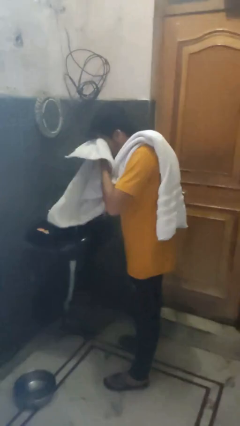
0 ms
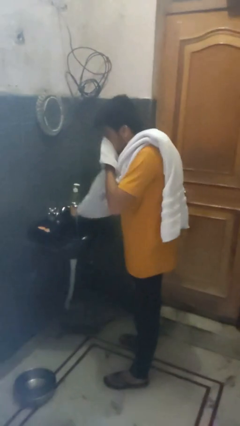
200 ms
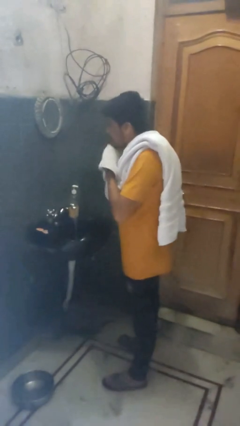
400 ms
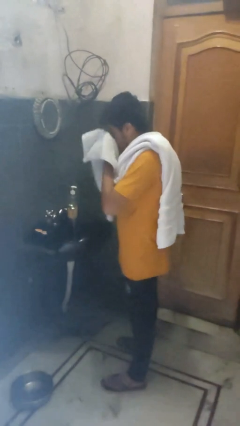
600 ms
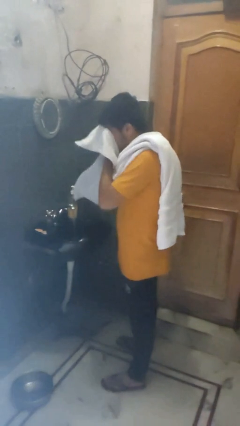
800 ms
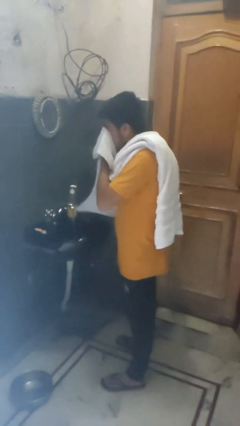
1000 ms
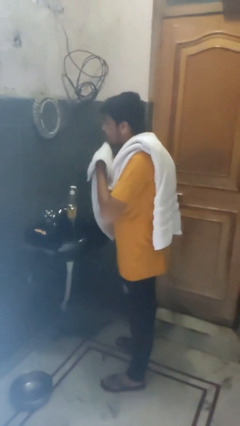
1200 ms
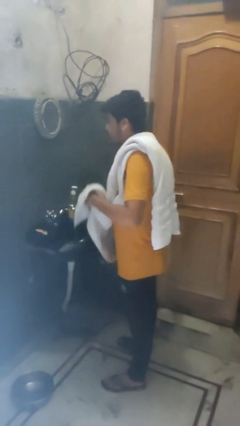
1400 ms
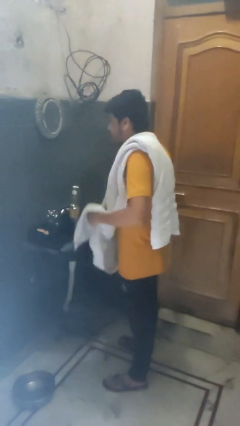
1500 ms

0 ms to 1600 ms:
person dries face with towel

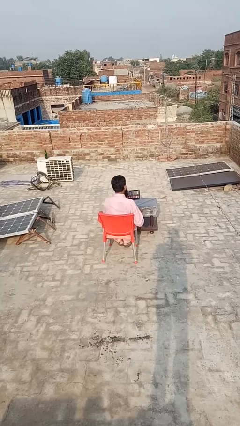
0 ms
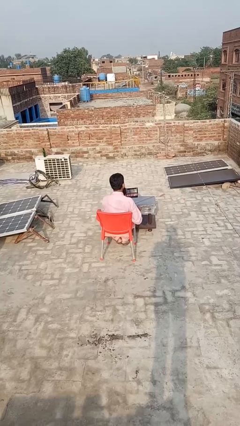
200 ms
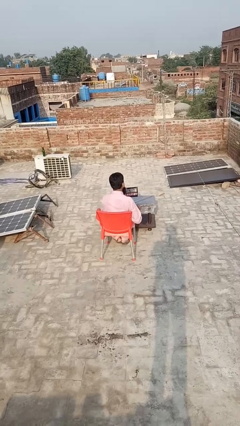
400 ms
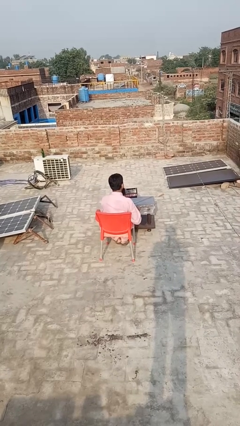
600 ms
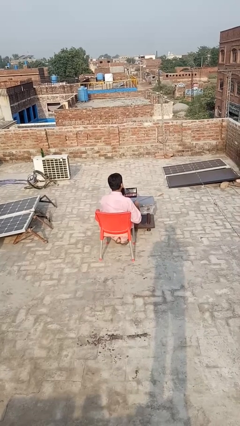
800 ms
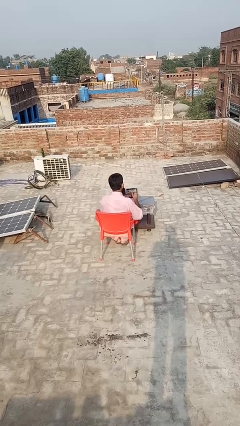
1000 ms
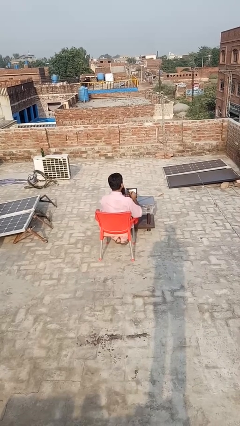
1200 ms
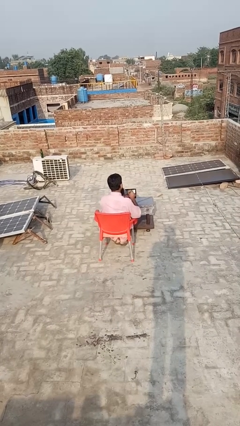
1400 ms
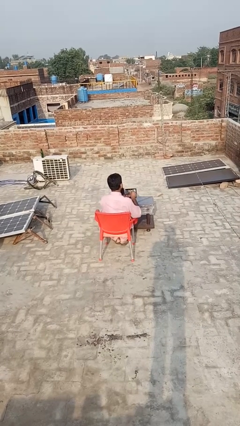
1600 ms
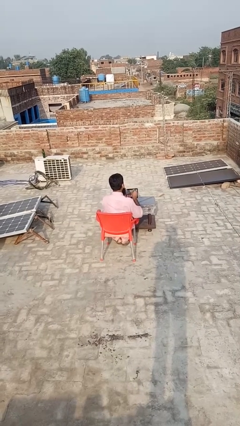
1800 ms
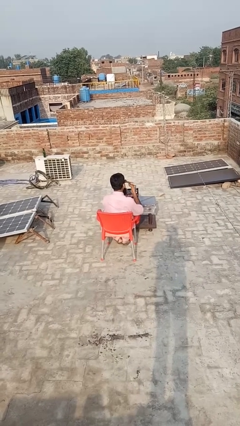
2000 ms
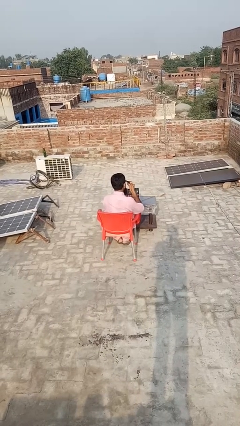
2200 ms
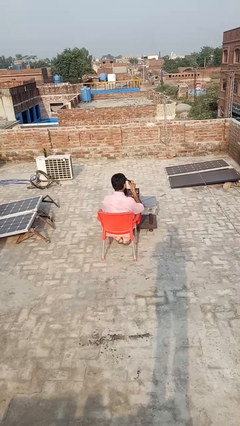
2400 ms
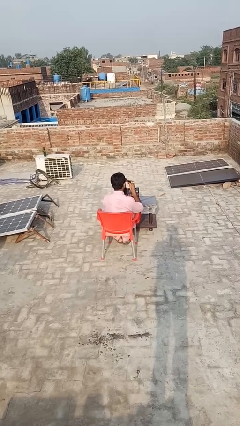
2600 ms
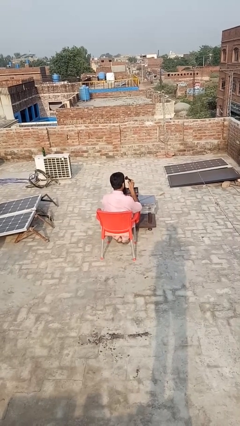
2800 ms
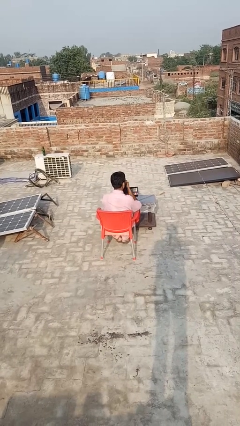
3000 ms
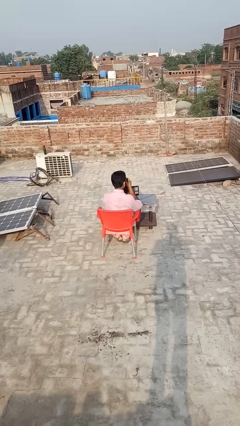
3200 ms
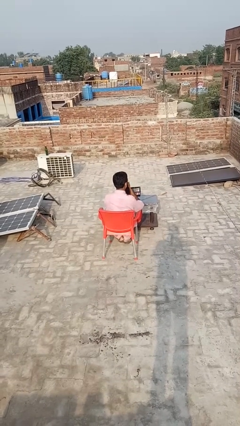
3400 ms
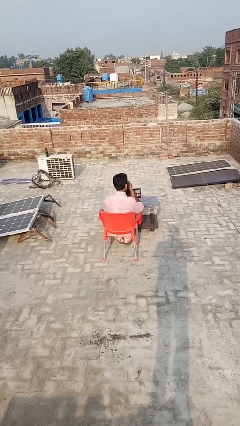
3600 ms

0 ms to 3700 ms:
person applies eye makeup

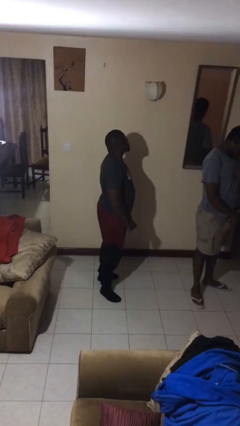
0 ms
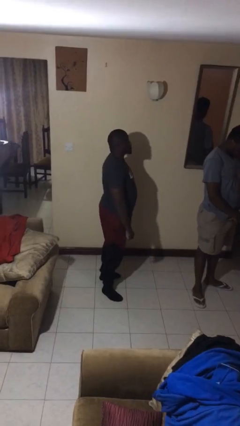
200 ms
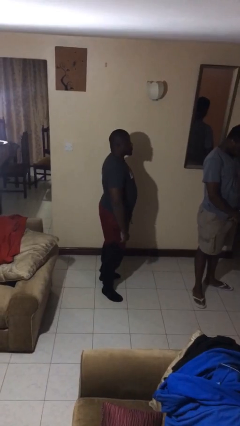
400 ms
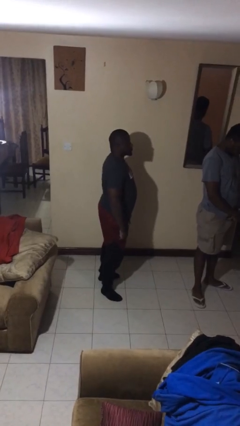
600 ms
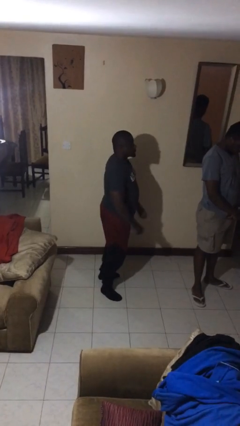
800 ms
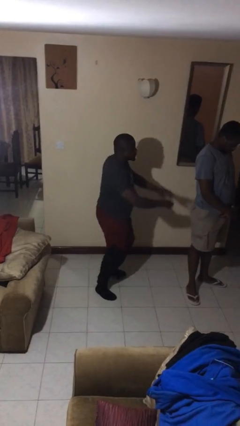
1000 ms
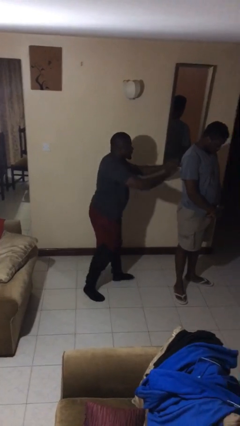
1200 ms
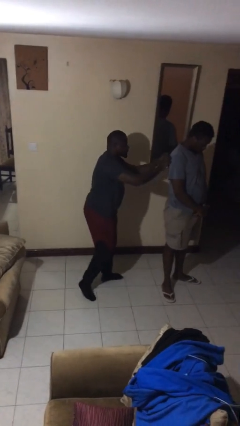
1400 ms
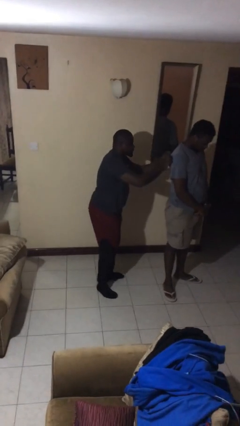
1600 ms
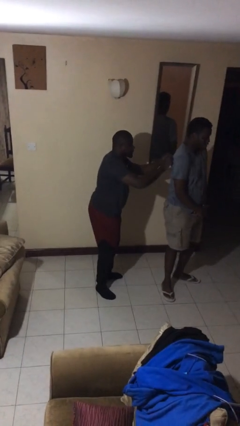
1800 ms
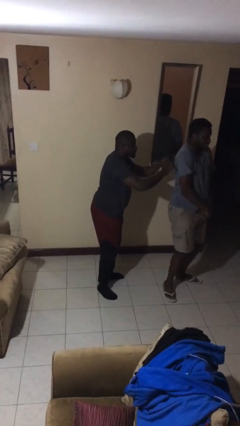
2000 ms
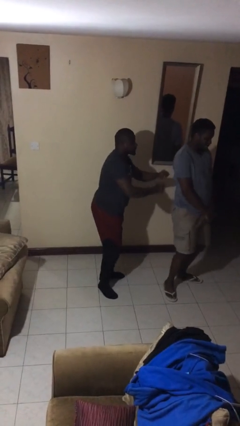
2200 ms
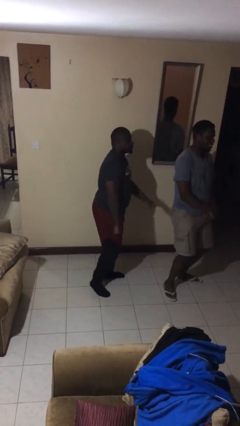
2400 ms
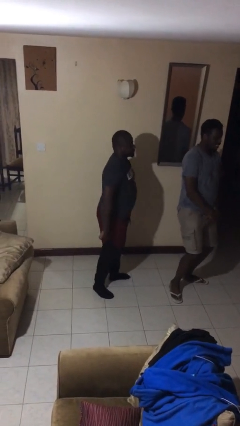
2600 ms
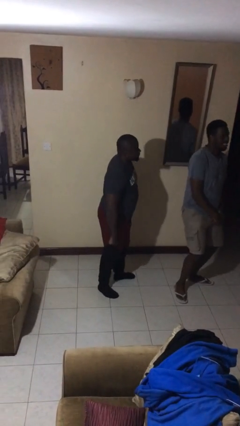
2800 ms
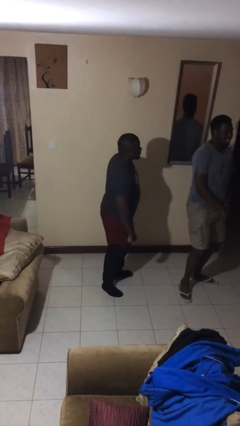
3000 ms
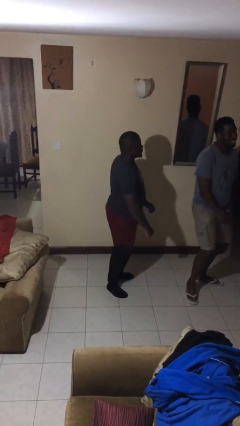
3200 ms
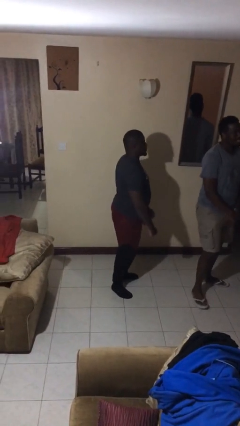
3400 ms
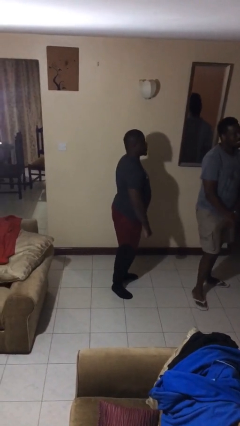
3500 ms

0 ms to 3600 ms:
person tickles person

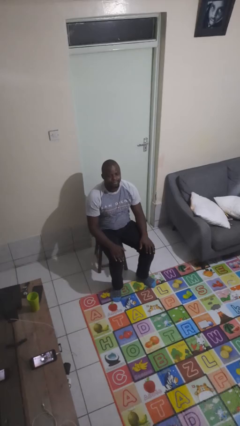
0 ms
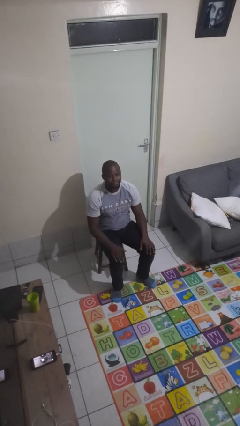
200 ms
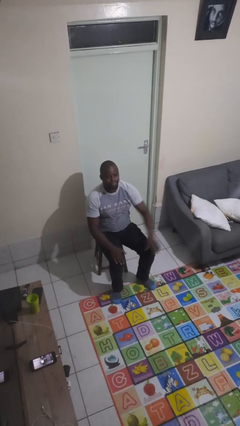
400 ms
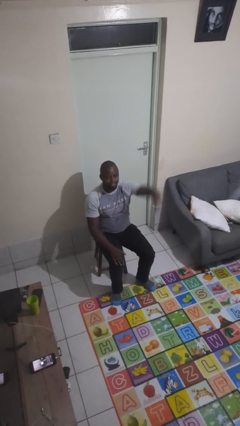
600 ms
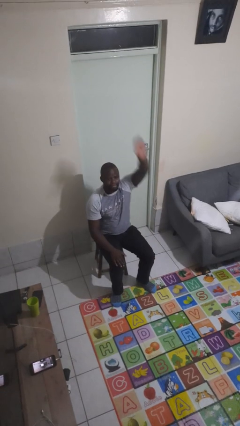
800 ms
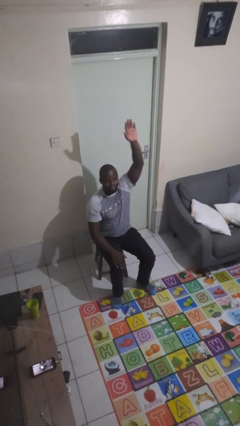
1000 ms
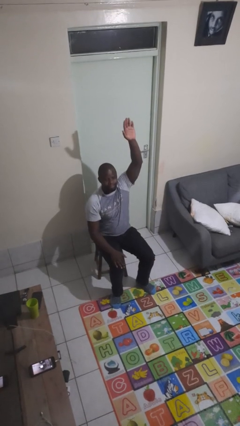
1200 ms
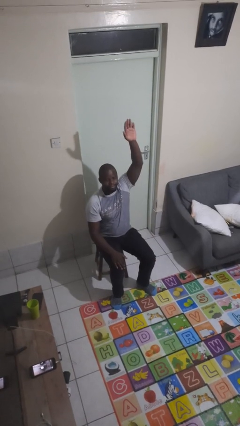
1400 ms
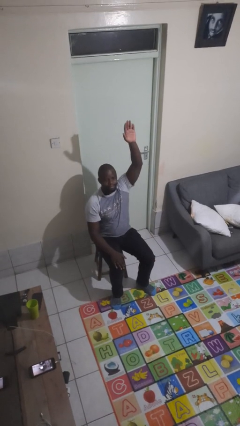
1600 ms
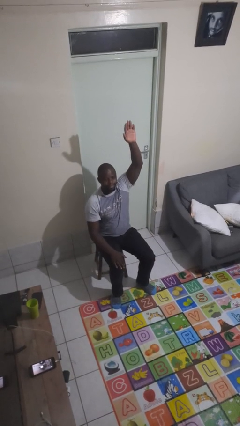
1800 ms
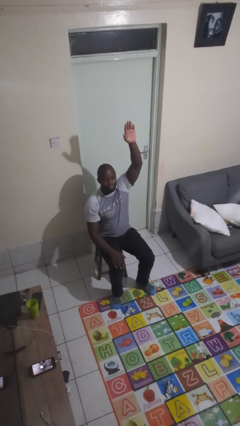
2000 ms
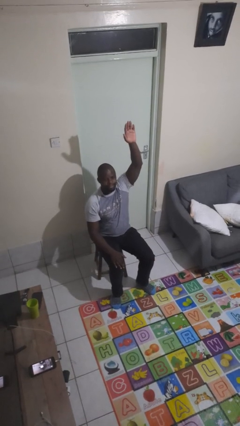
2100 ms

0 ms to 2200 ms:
person gestures raise hand

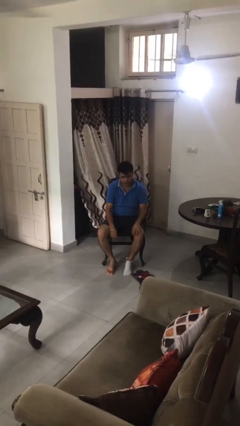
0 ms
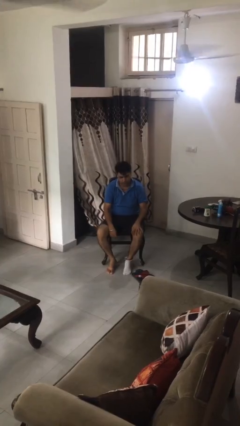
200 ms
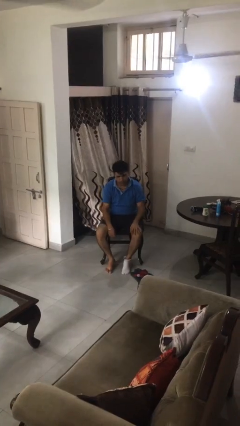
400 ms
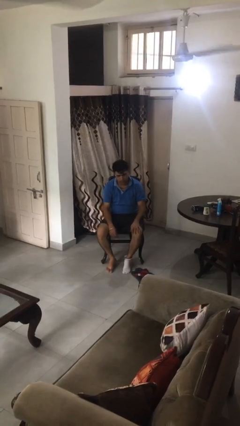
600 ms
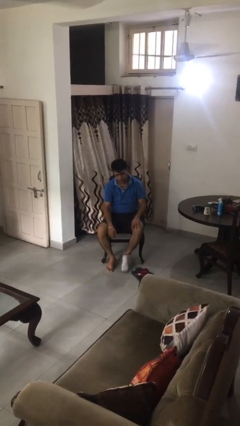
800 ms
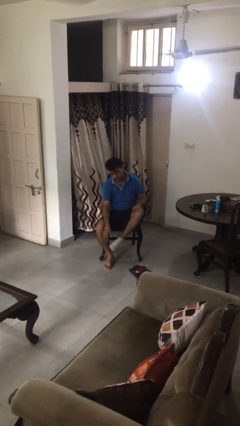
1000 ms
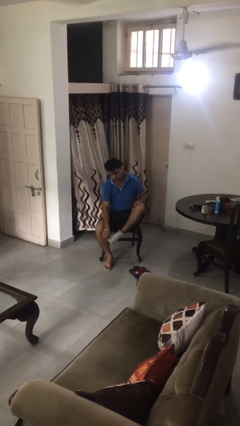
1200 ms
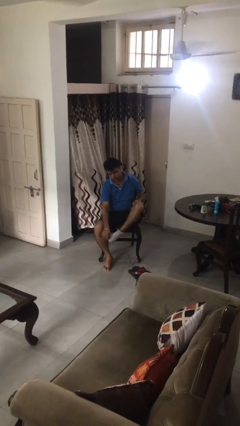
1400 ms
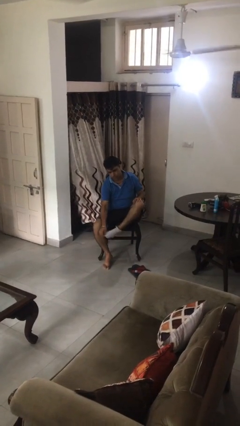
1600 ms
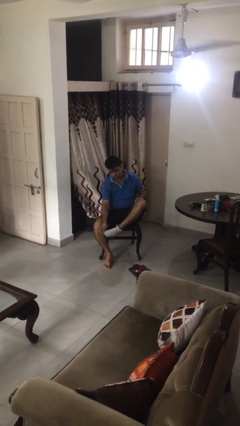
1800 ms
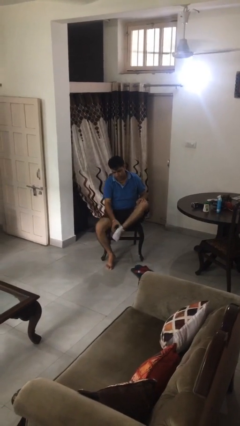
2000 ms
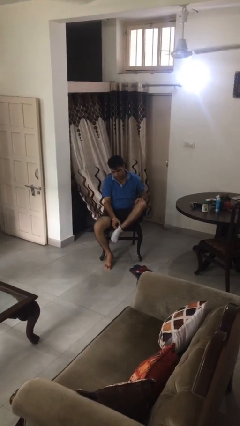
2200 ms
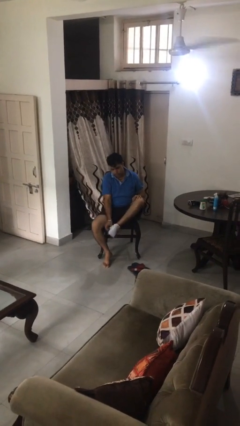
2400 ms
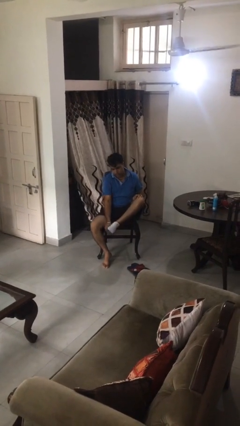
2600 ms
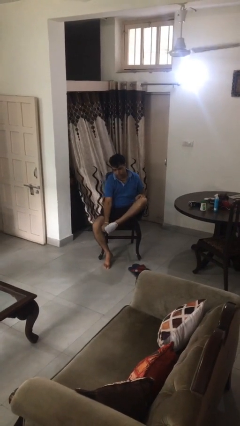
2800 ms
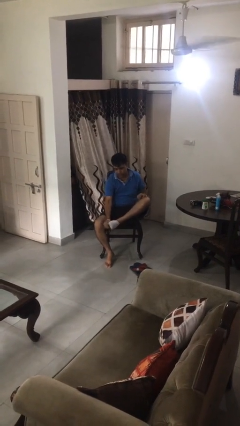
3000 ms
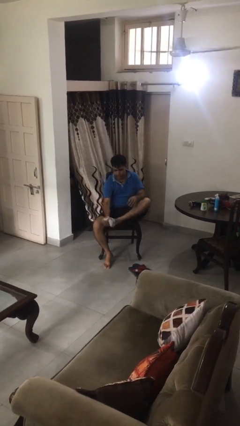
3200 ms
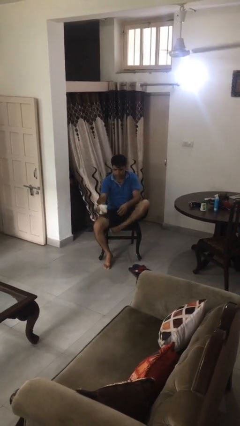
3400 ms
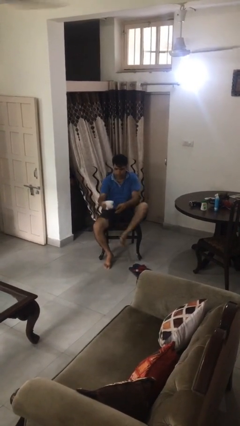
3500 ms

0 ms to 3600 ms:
person takes off socks

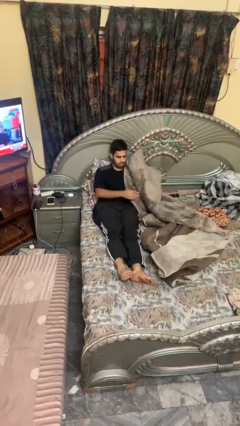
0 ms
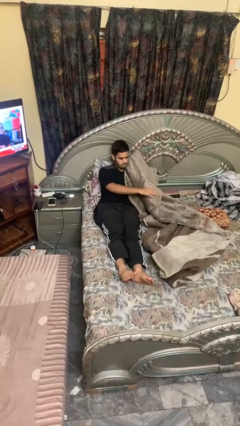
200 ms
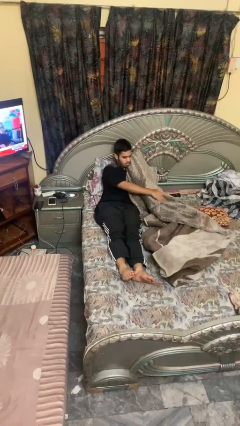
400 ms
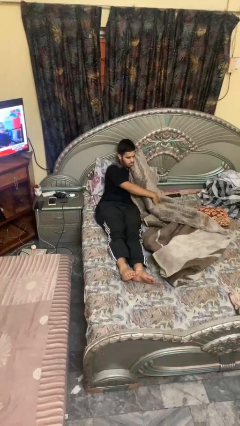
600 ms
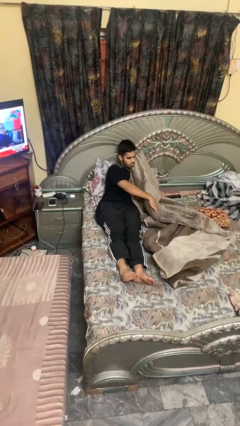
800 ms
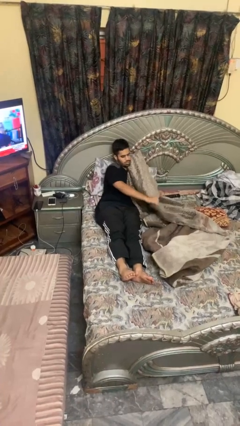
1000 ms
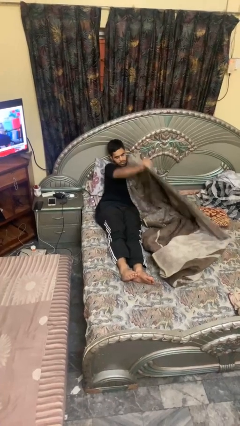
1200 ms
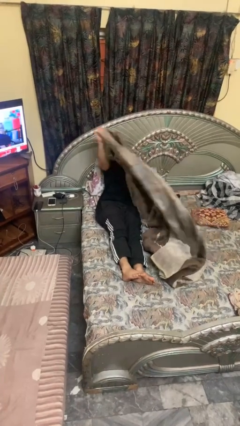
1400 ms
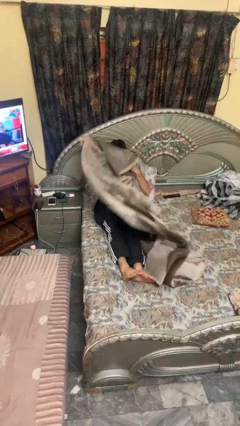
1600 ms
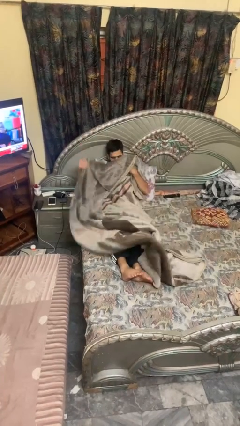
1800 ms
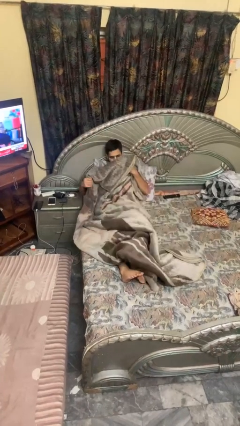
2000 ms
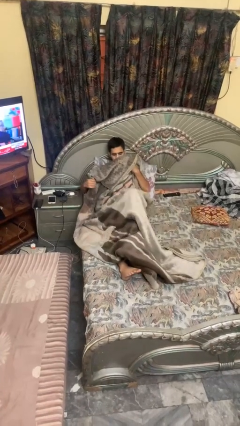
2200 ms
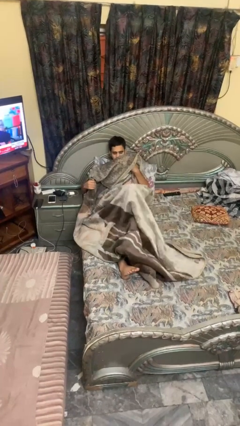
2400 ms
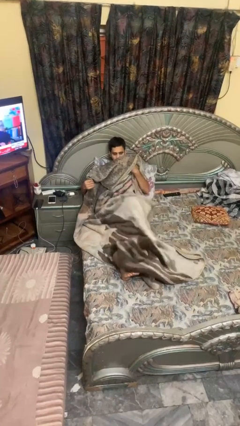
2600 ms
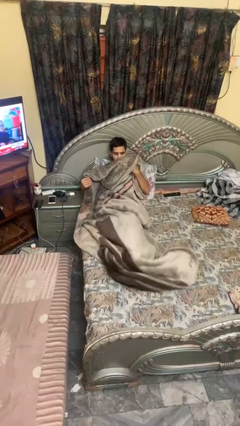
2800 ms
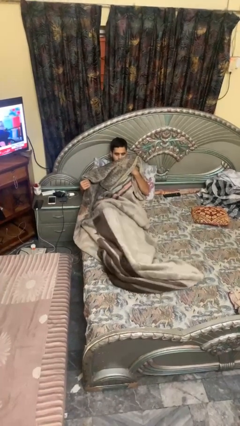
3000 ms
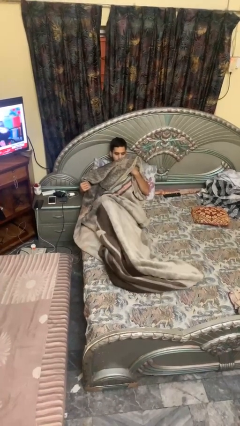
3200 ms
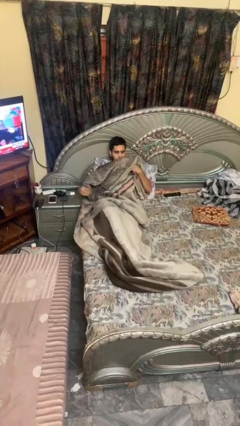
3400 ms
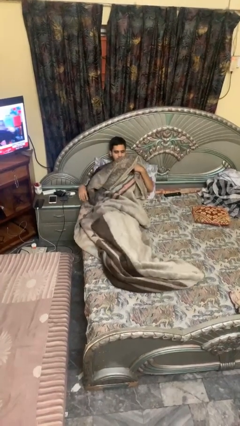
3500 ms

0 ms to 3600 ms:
person covers with blanket
